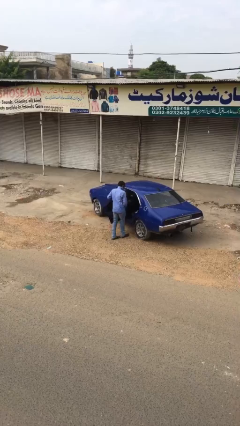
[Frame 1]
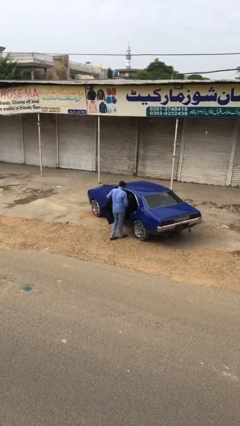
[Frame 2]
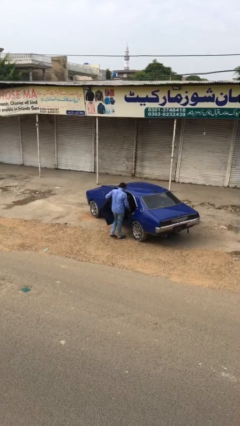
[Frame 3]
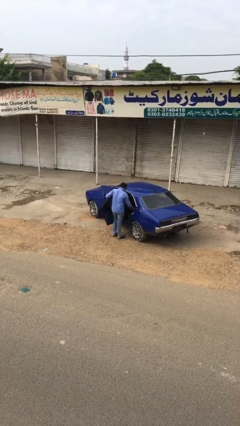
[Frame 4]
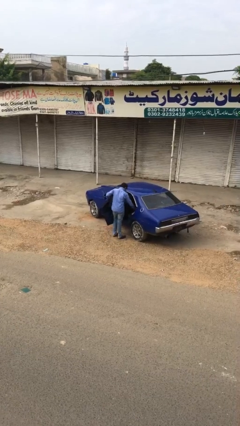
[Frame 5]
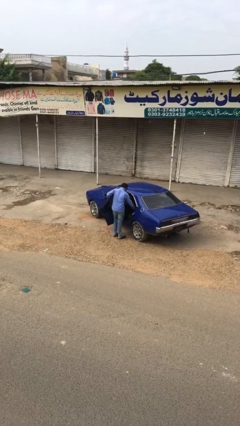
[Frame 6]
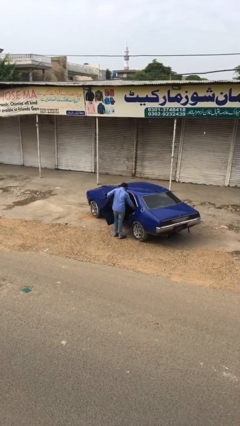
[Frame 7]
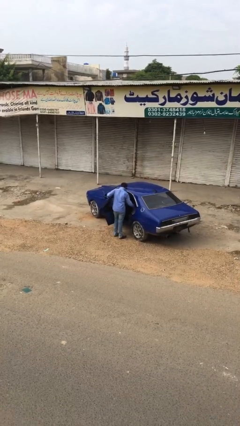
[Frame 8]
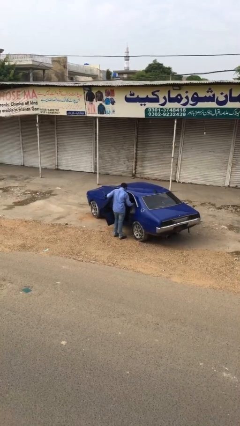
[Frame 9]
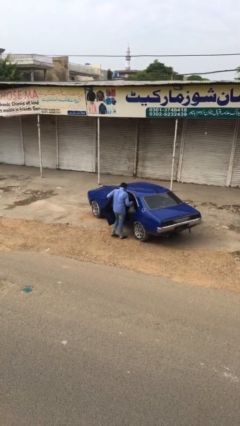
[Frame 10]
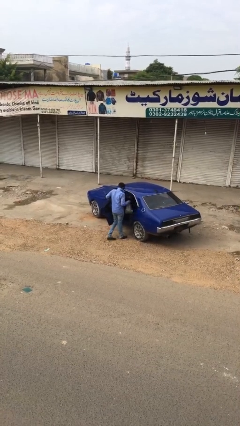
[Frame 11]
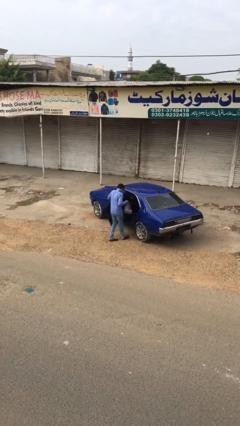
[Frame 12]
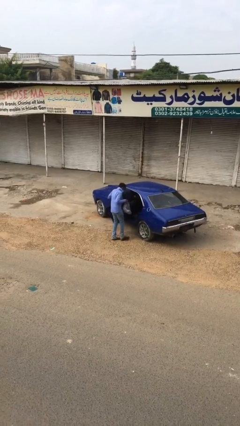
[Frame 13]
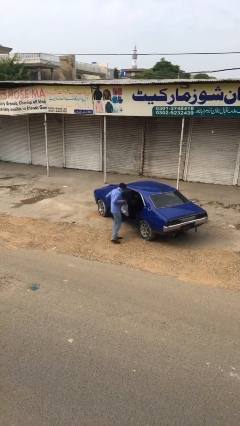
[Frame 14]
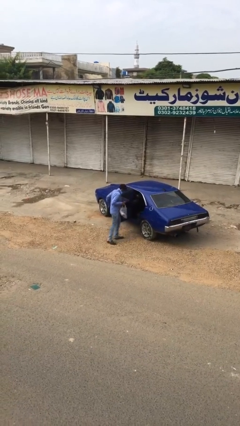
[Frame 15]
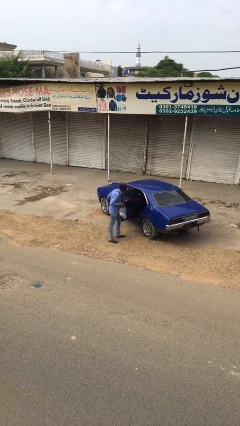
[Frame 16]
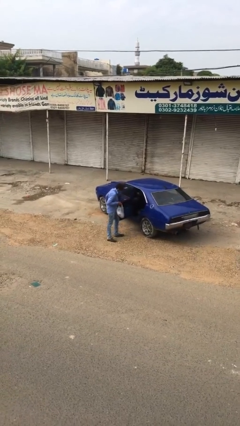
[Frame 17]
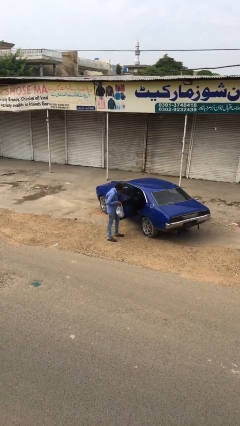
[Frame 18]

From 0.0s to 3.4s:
person unloads car

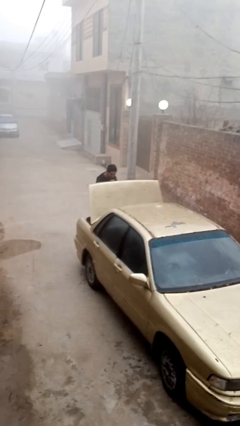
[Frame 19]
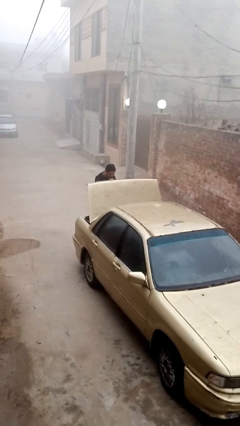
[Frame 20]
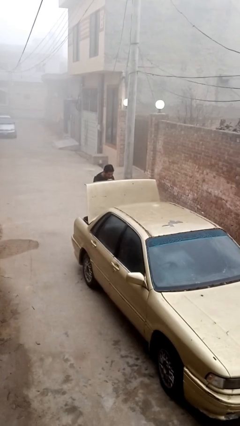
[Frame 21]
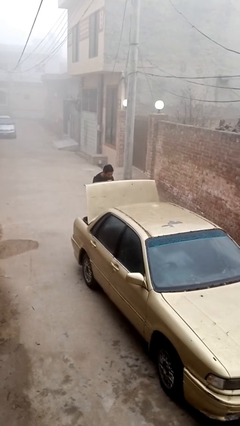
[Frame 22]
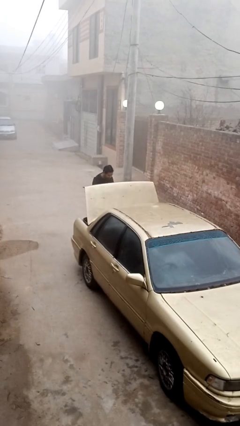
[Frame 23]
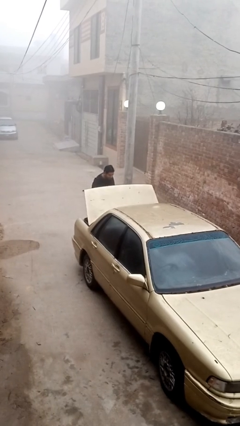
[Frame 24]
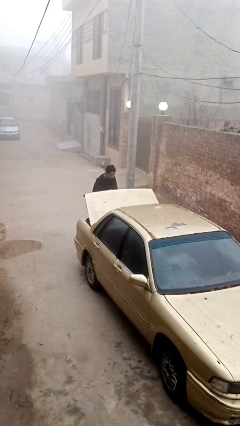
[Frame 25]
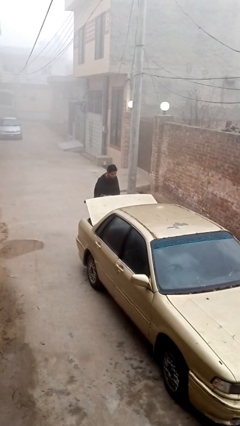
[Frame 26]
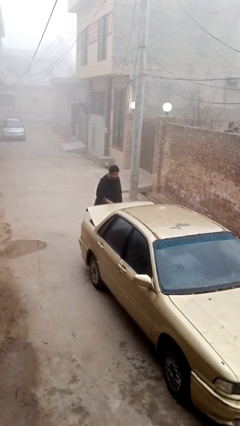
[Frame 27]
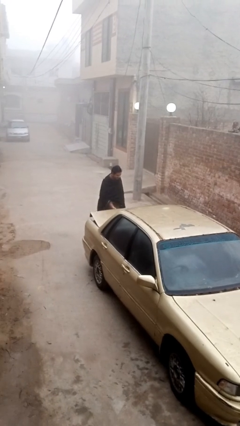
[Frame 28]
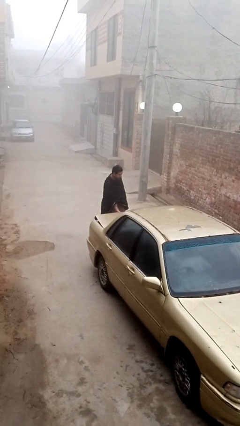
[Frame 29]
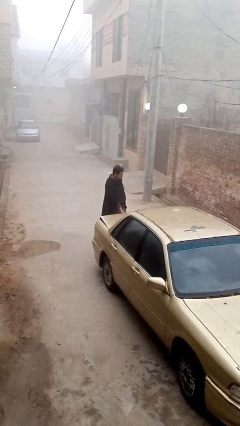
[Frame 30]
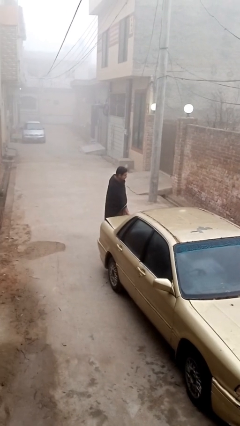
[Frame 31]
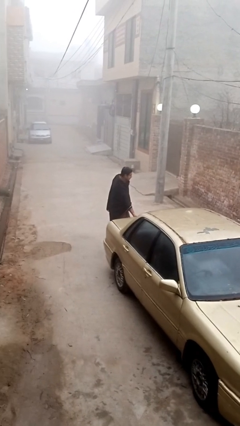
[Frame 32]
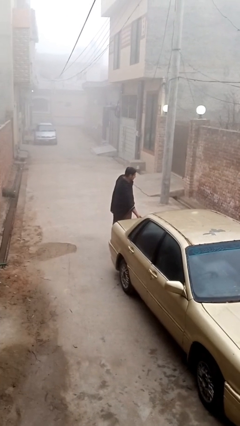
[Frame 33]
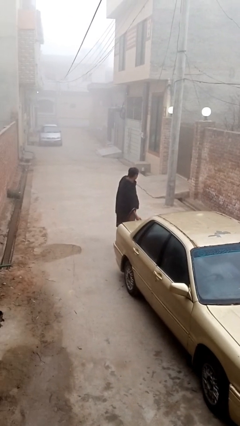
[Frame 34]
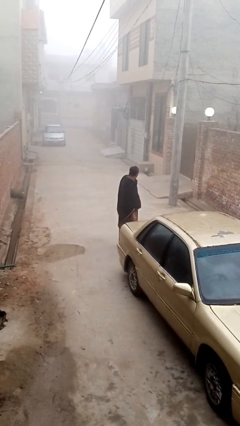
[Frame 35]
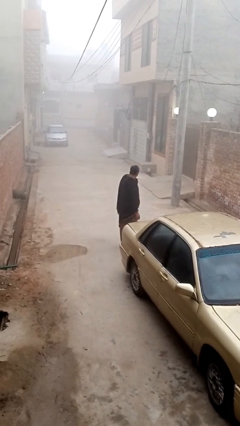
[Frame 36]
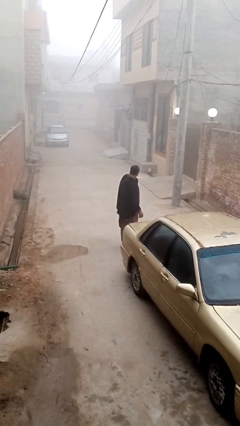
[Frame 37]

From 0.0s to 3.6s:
person closes car trunk

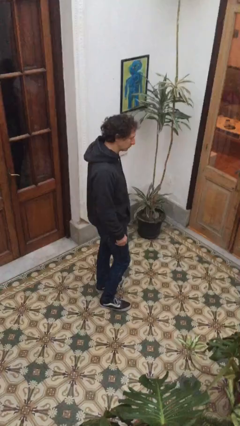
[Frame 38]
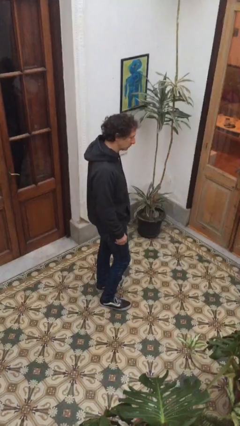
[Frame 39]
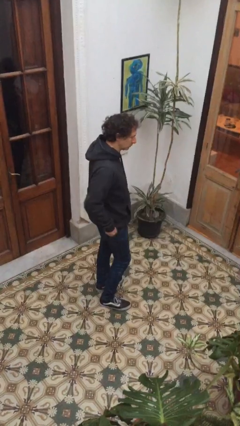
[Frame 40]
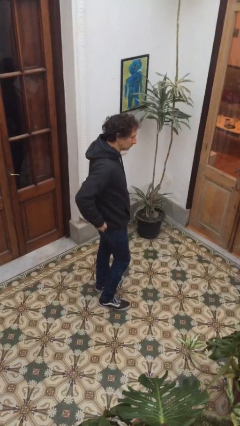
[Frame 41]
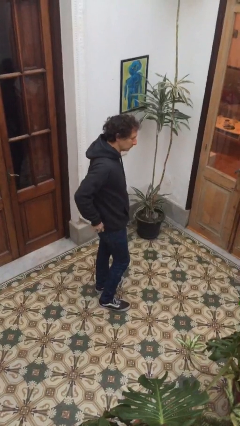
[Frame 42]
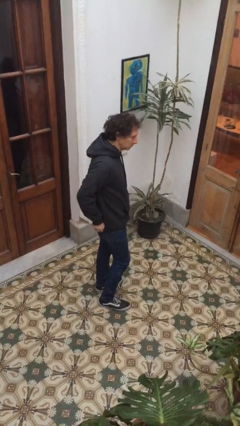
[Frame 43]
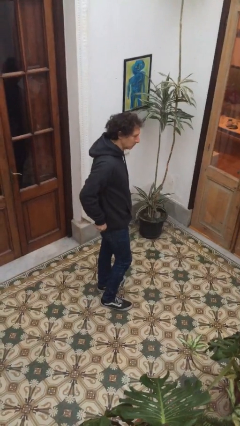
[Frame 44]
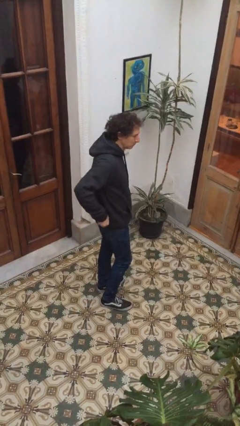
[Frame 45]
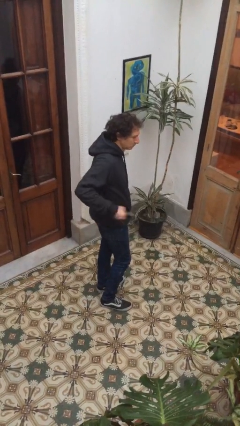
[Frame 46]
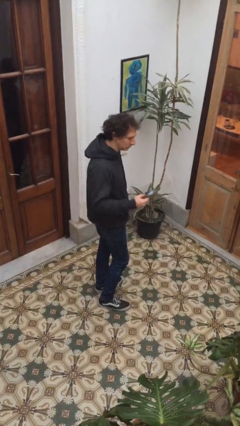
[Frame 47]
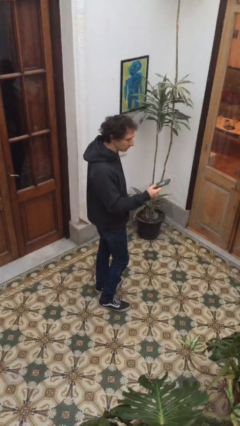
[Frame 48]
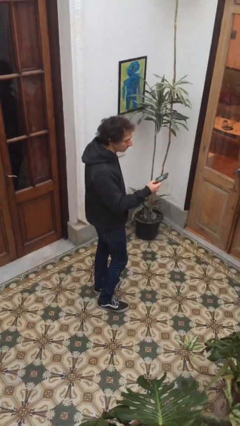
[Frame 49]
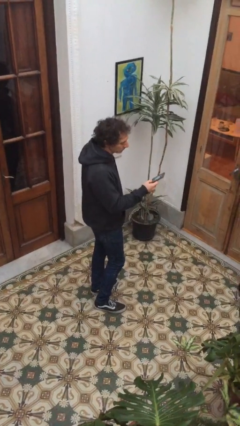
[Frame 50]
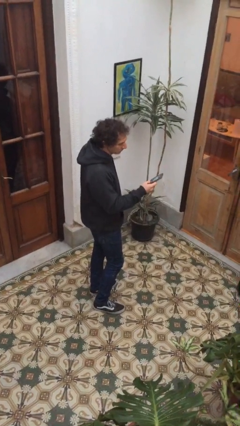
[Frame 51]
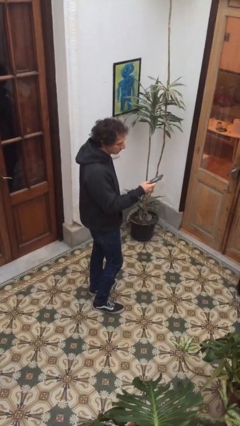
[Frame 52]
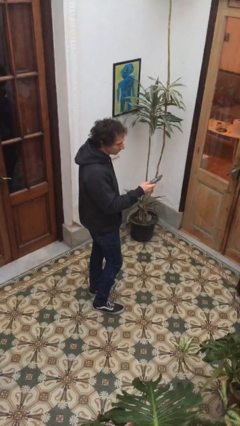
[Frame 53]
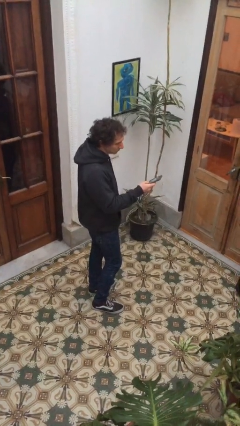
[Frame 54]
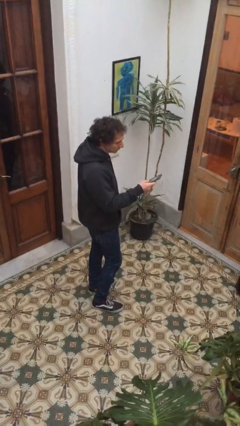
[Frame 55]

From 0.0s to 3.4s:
person takes phone from pocket

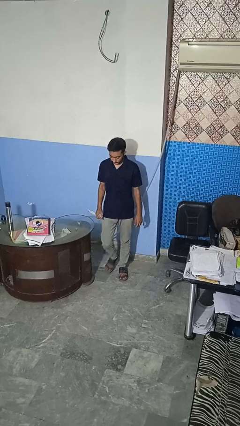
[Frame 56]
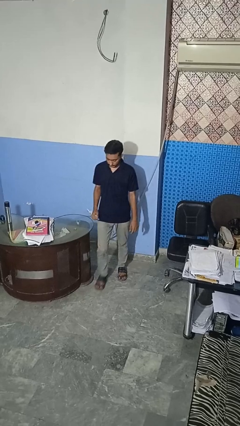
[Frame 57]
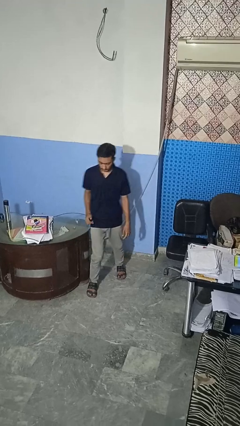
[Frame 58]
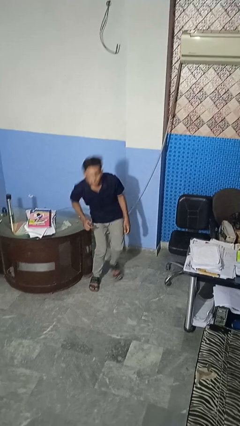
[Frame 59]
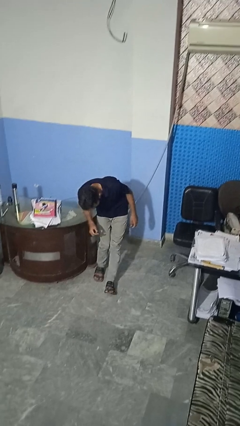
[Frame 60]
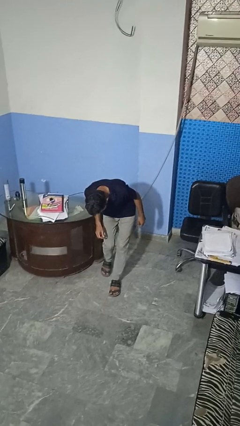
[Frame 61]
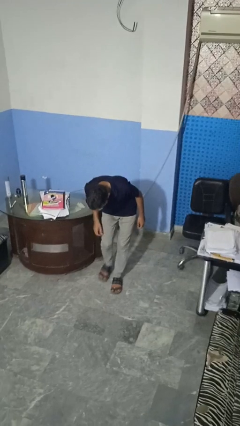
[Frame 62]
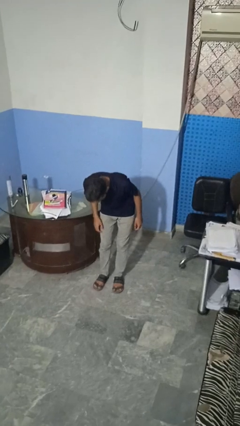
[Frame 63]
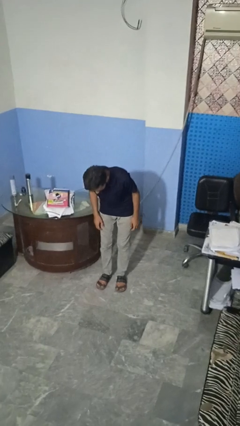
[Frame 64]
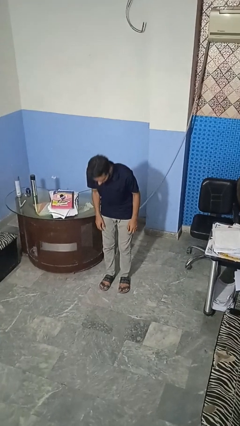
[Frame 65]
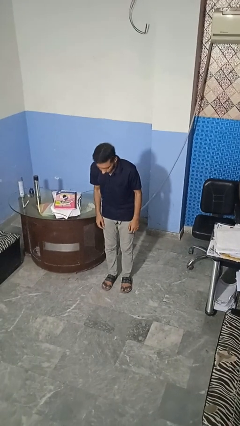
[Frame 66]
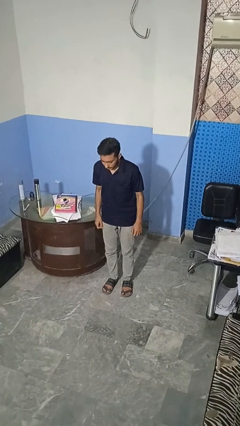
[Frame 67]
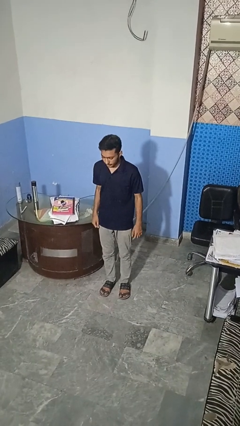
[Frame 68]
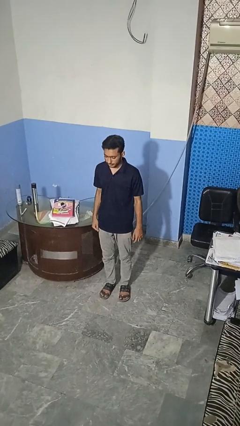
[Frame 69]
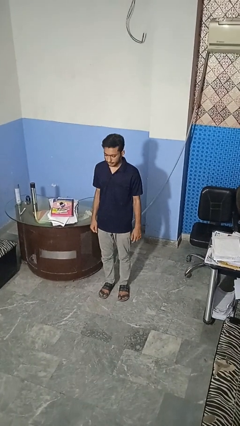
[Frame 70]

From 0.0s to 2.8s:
person bumps into table

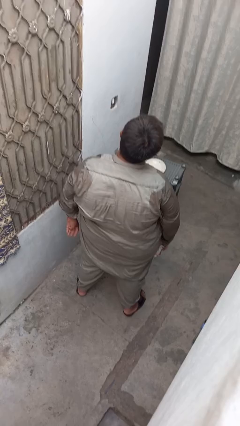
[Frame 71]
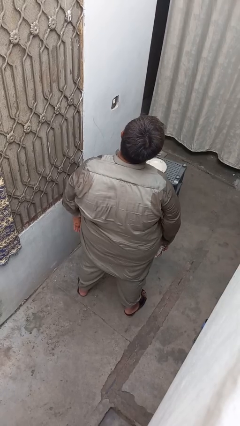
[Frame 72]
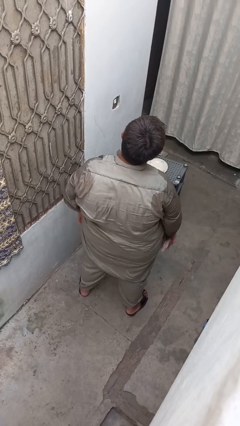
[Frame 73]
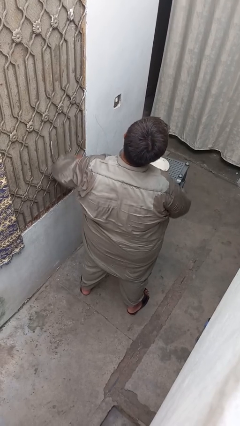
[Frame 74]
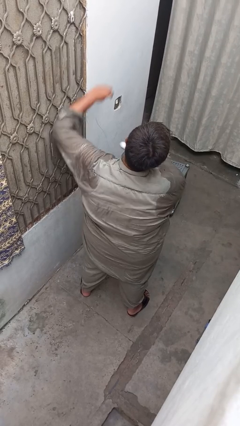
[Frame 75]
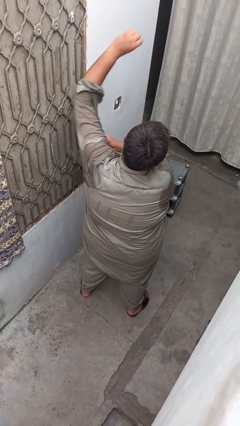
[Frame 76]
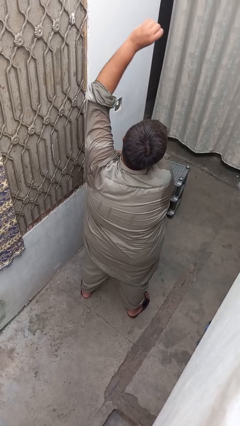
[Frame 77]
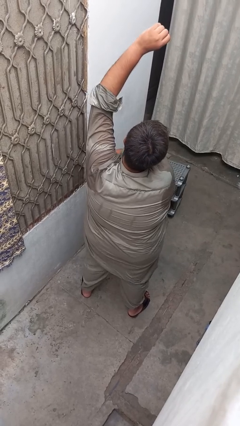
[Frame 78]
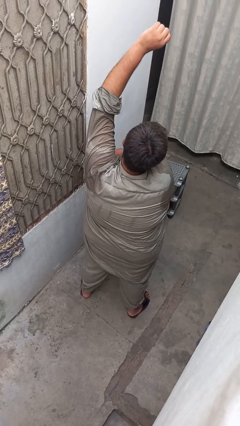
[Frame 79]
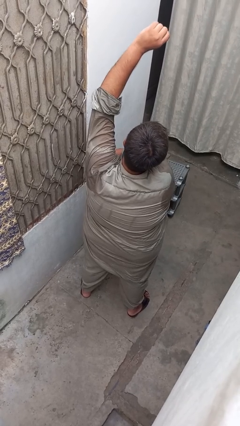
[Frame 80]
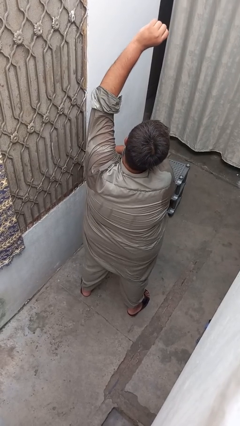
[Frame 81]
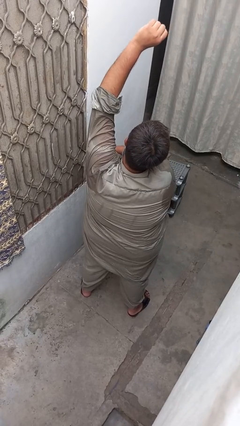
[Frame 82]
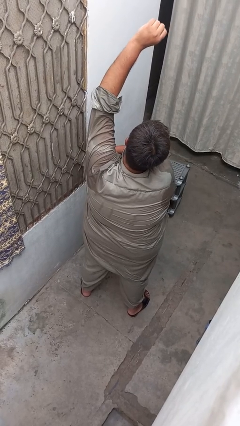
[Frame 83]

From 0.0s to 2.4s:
person applies deodorant

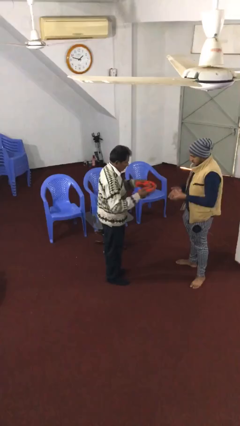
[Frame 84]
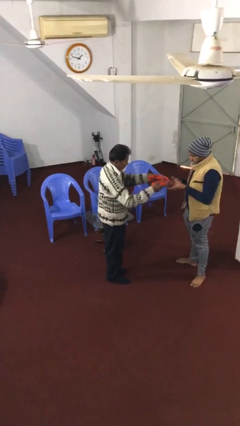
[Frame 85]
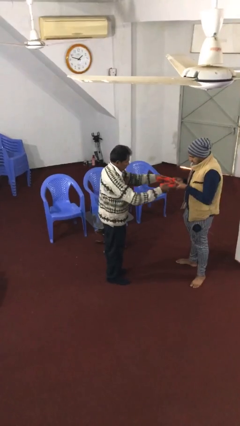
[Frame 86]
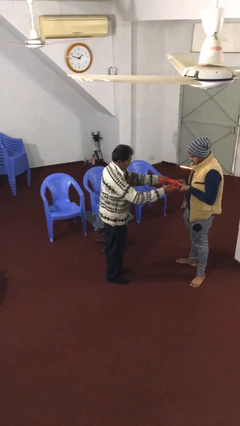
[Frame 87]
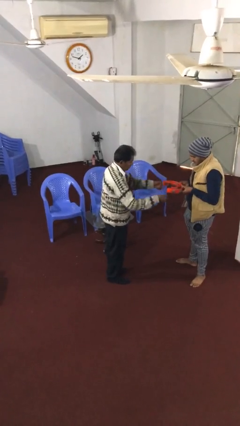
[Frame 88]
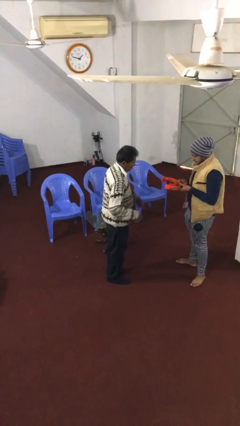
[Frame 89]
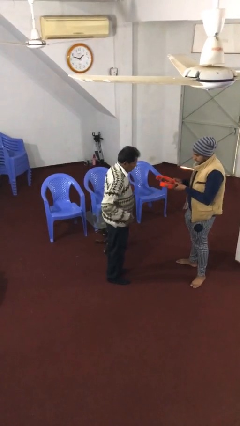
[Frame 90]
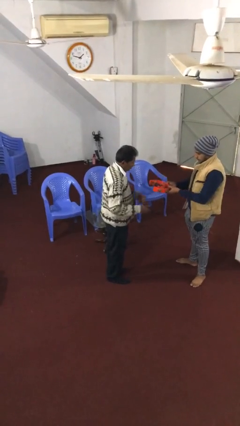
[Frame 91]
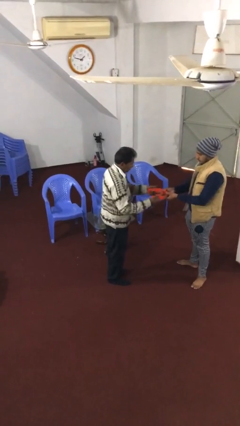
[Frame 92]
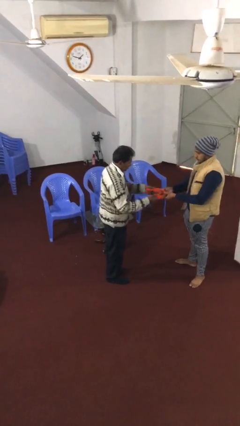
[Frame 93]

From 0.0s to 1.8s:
person transfers object to person
